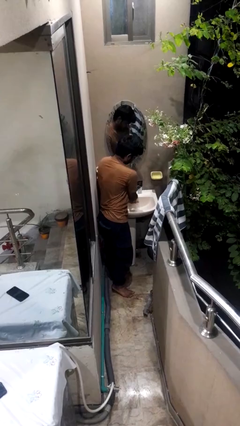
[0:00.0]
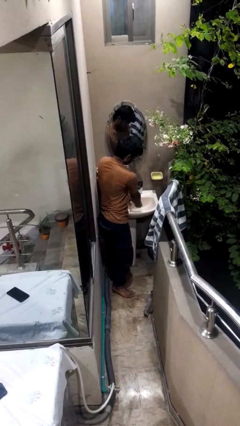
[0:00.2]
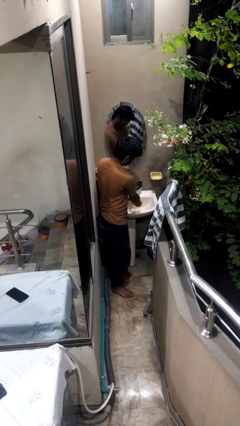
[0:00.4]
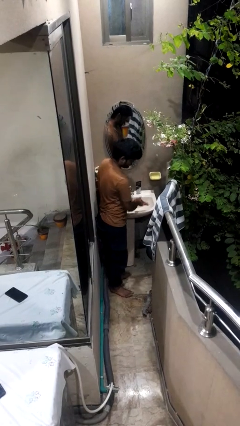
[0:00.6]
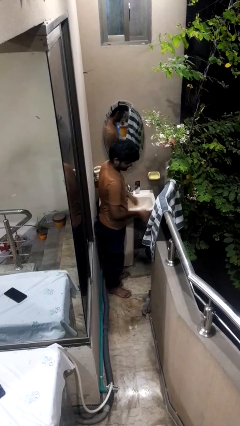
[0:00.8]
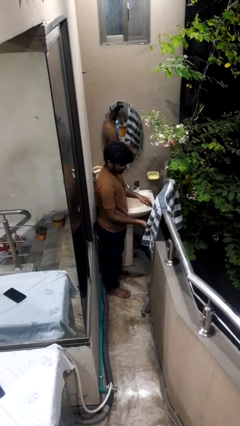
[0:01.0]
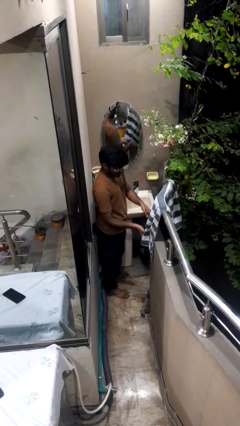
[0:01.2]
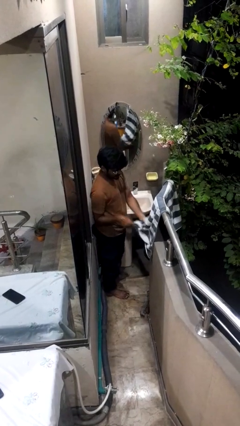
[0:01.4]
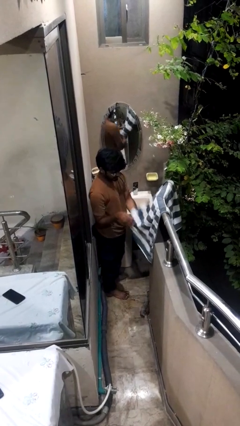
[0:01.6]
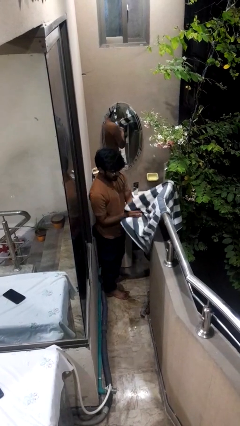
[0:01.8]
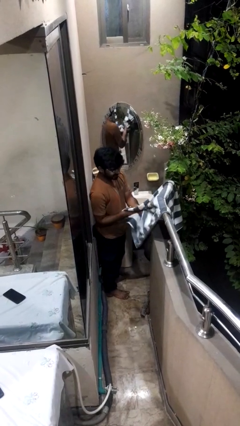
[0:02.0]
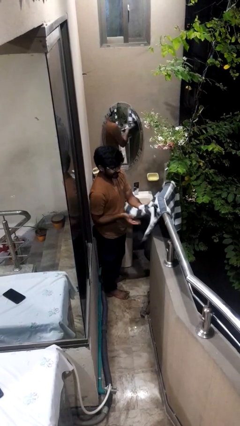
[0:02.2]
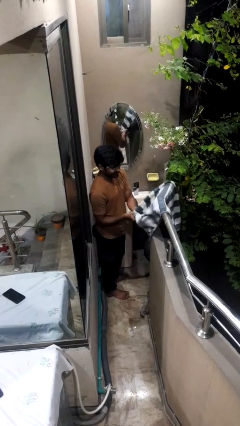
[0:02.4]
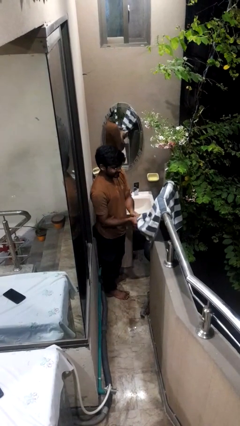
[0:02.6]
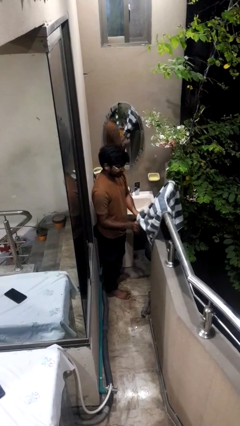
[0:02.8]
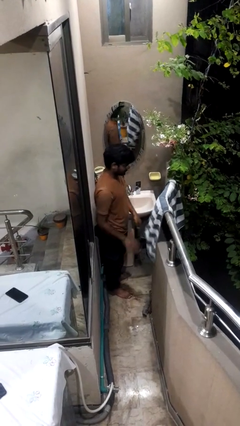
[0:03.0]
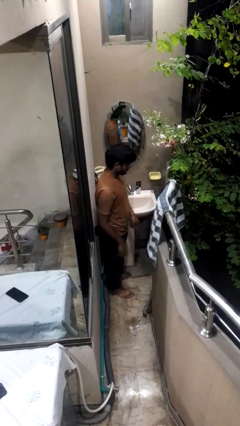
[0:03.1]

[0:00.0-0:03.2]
person dries hands with towel

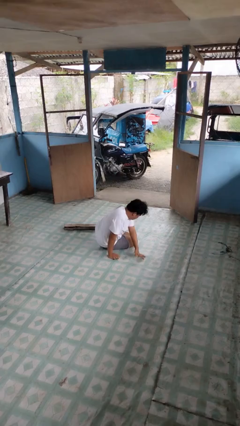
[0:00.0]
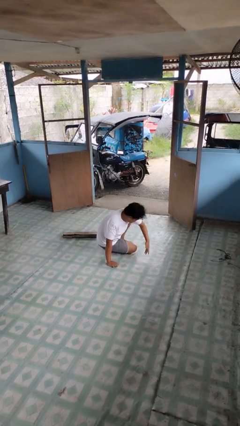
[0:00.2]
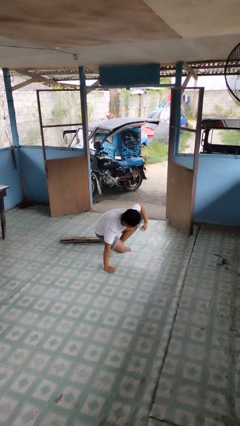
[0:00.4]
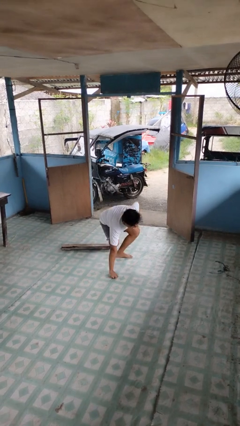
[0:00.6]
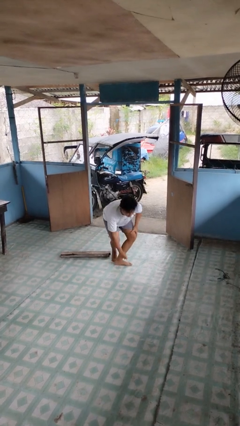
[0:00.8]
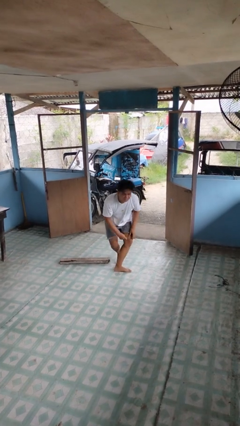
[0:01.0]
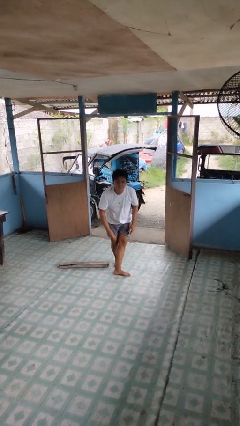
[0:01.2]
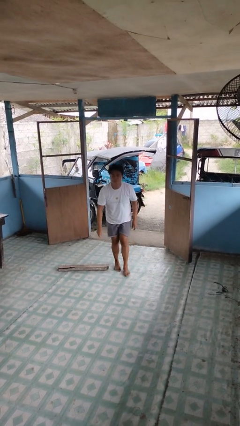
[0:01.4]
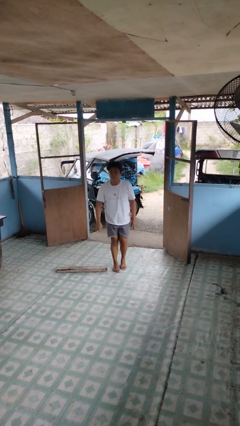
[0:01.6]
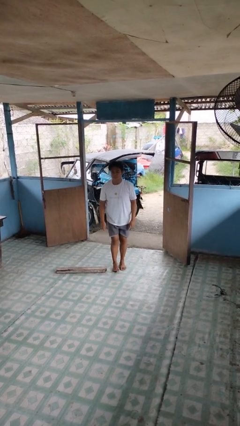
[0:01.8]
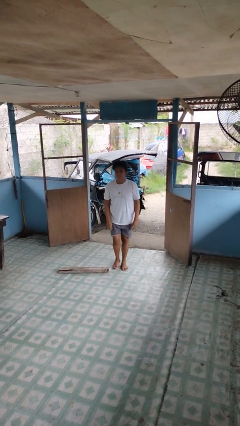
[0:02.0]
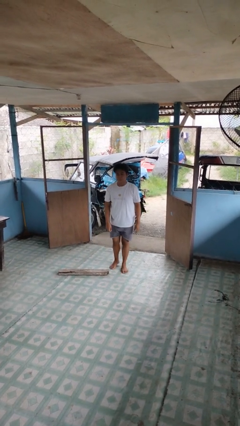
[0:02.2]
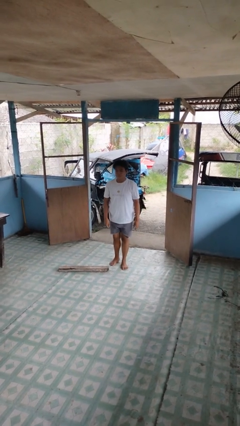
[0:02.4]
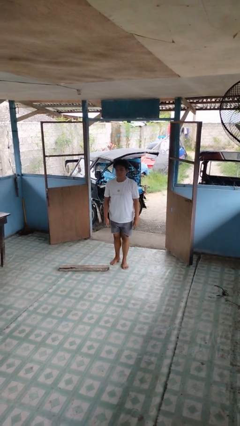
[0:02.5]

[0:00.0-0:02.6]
person stands up from floor

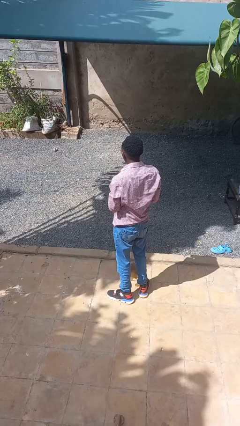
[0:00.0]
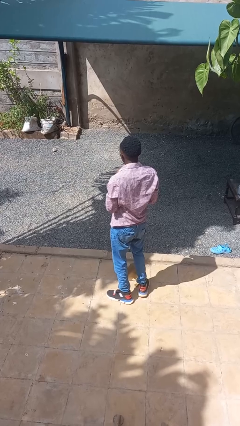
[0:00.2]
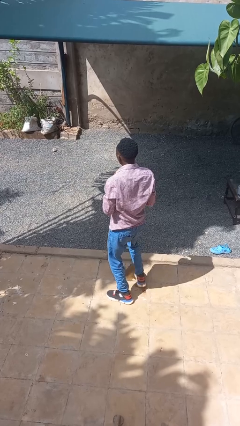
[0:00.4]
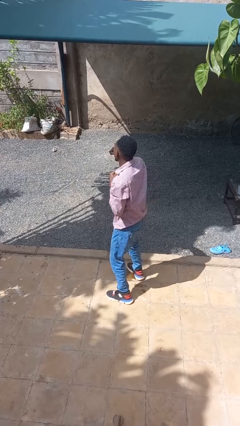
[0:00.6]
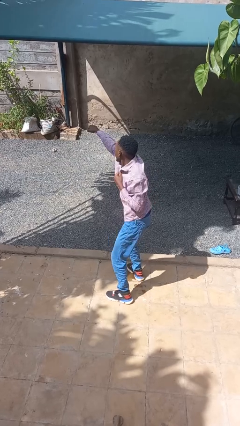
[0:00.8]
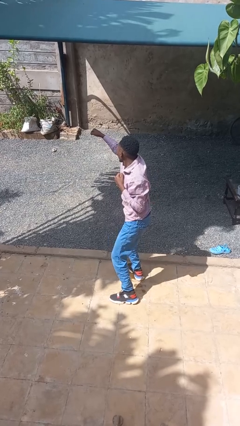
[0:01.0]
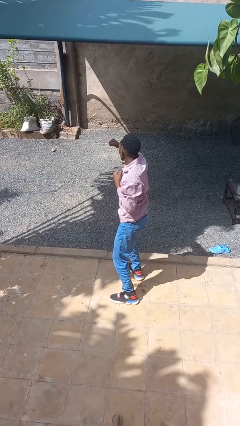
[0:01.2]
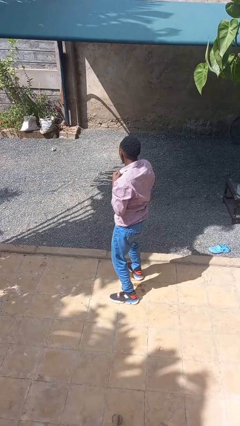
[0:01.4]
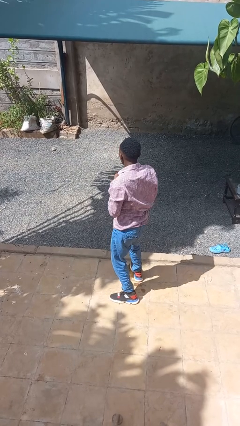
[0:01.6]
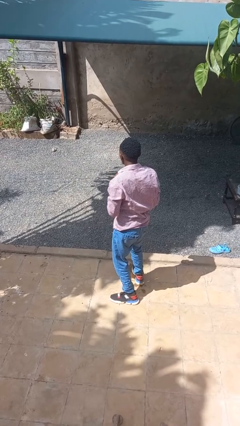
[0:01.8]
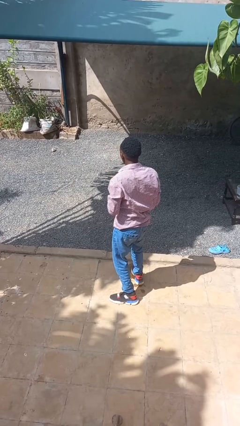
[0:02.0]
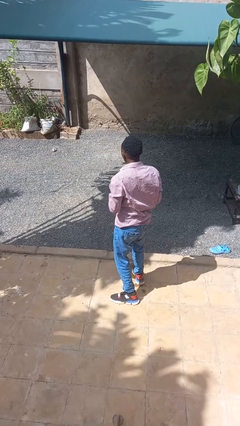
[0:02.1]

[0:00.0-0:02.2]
person punches

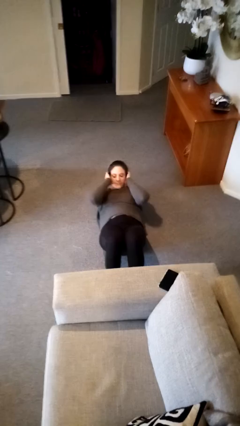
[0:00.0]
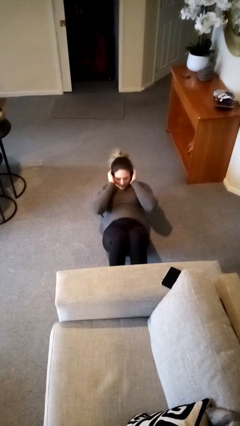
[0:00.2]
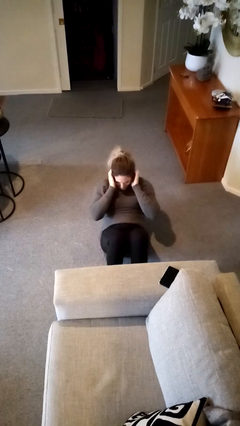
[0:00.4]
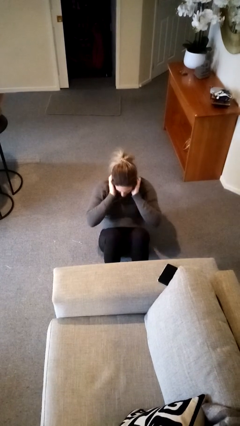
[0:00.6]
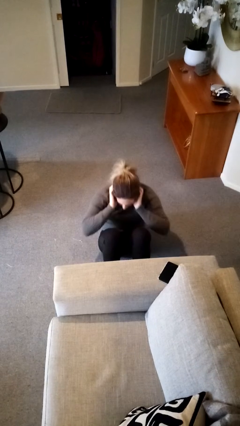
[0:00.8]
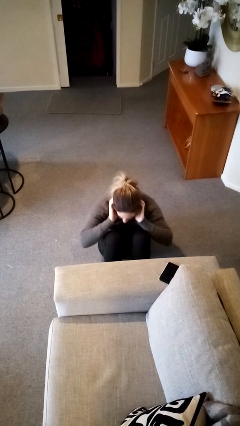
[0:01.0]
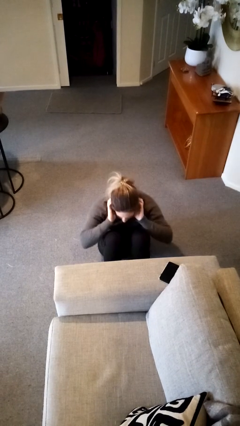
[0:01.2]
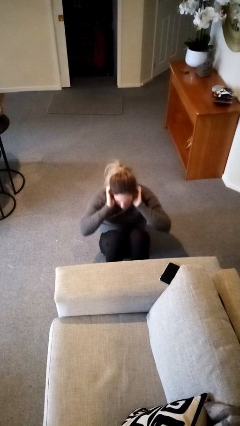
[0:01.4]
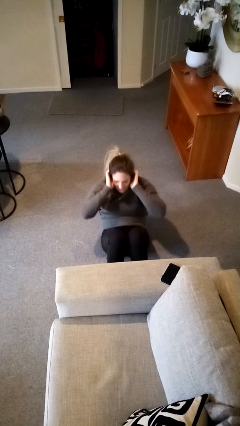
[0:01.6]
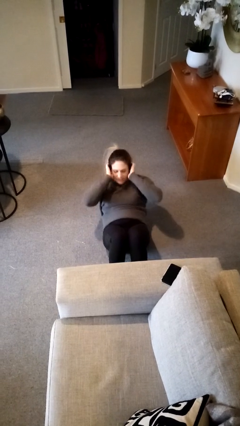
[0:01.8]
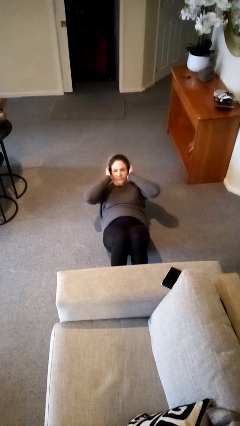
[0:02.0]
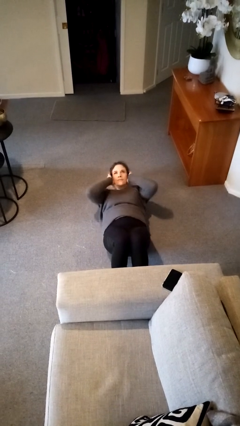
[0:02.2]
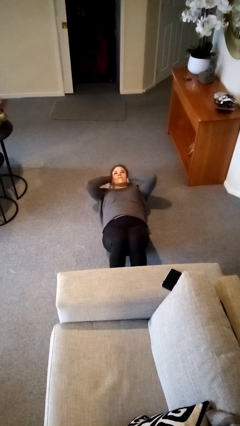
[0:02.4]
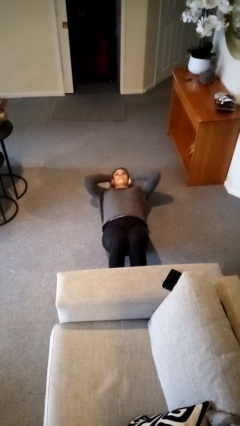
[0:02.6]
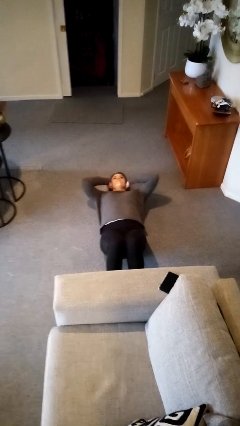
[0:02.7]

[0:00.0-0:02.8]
person exercises with situp

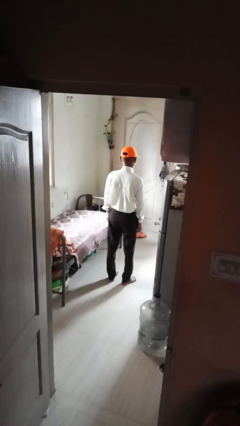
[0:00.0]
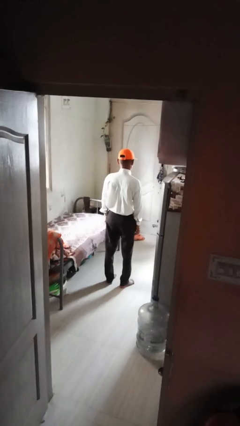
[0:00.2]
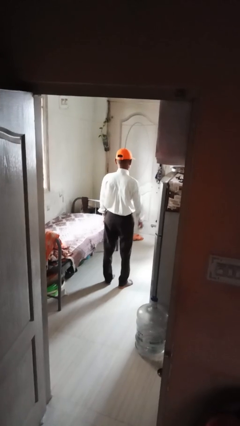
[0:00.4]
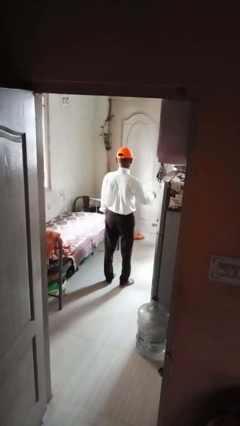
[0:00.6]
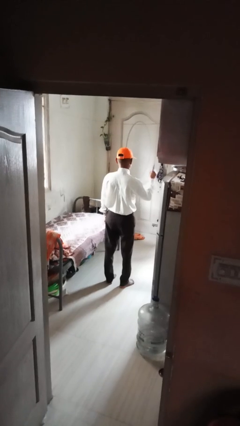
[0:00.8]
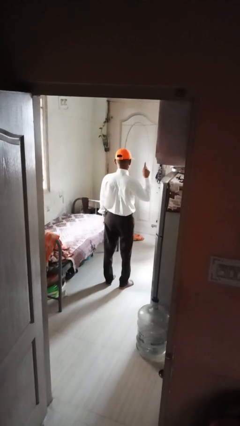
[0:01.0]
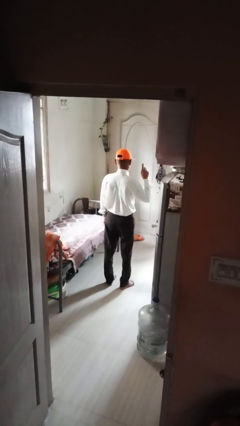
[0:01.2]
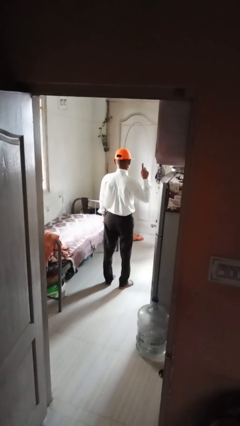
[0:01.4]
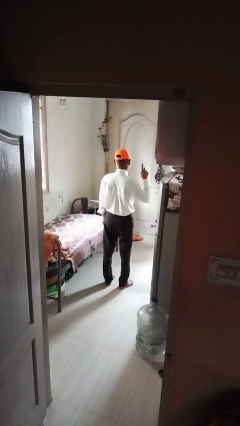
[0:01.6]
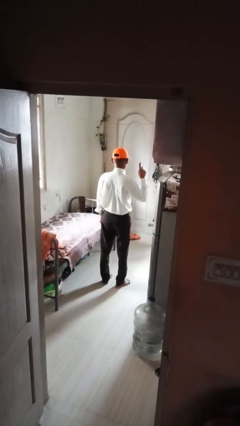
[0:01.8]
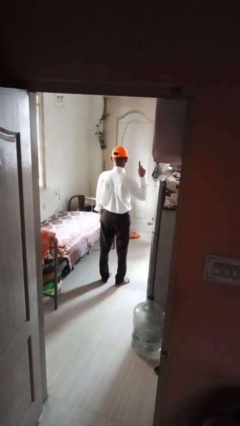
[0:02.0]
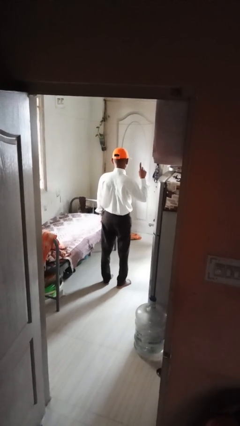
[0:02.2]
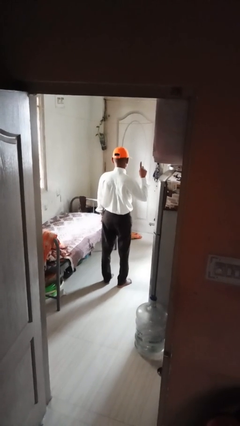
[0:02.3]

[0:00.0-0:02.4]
person gestures number one

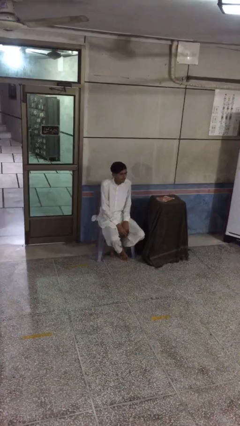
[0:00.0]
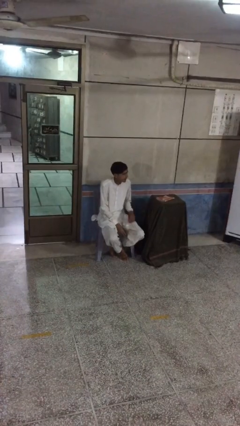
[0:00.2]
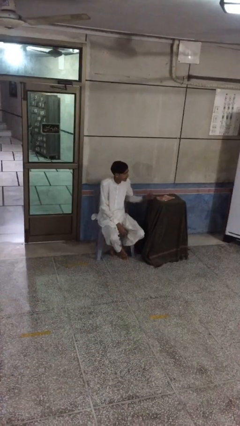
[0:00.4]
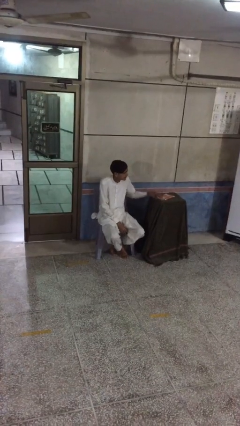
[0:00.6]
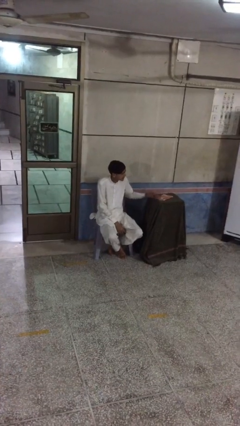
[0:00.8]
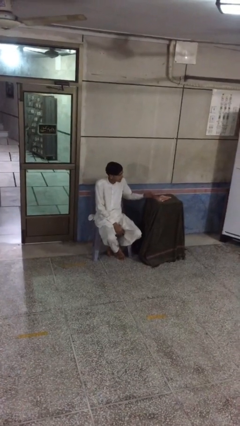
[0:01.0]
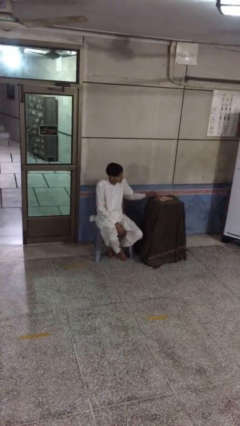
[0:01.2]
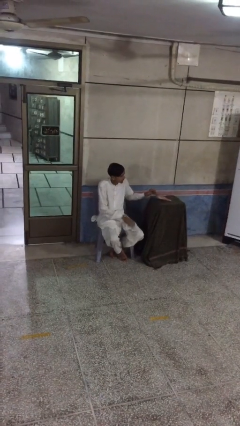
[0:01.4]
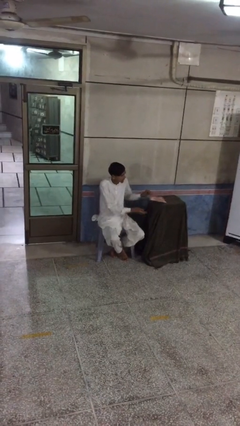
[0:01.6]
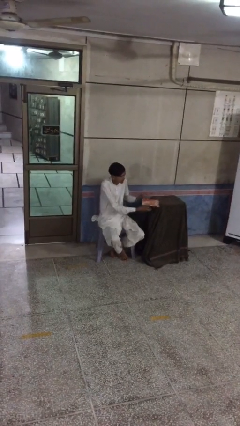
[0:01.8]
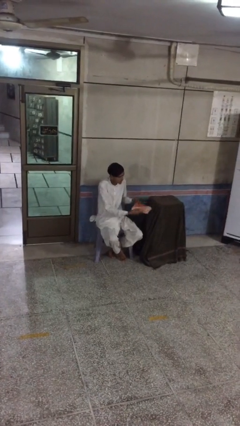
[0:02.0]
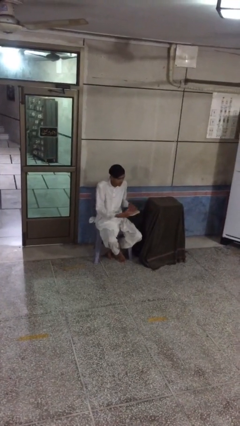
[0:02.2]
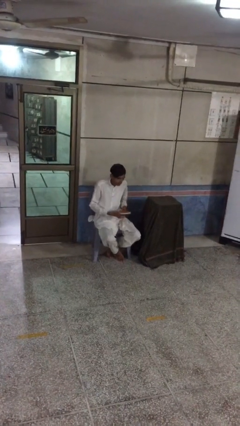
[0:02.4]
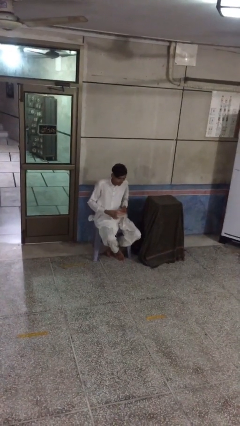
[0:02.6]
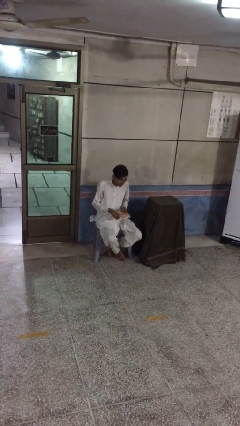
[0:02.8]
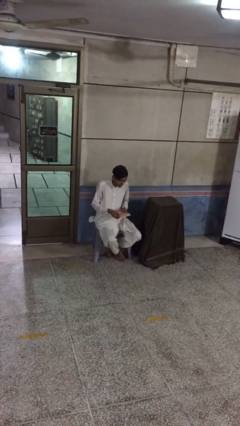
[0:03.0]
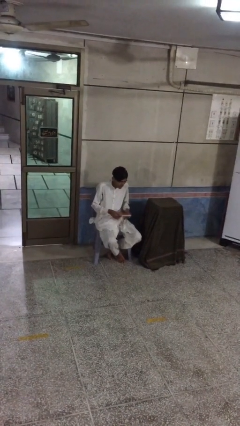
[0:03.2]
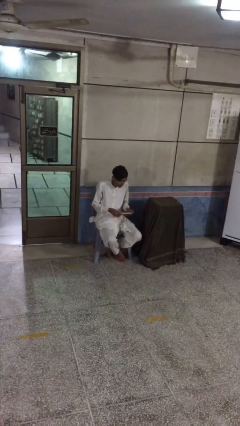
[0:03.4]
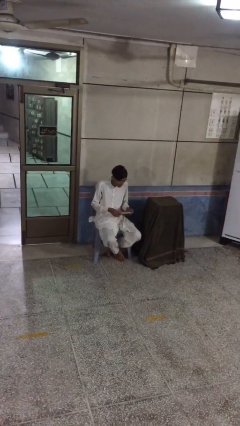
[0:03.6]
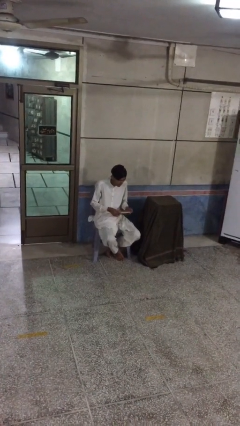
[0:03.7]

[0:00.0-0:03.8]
person picks up object from table
